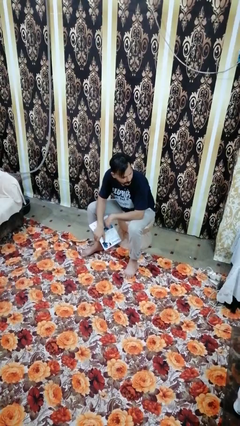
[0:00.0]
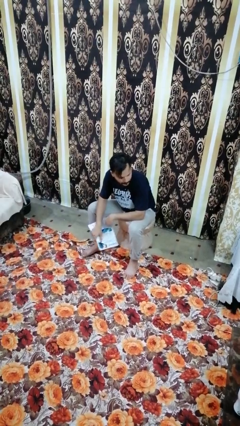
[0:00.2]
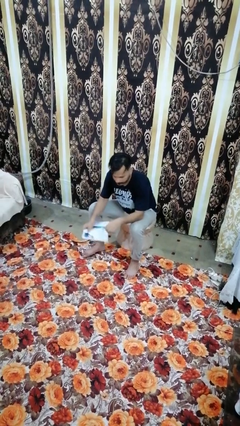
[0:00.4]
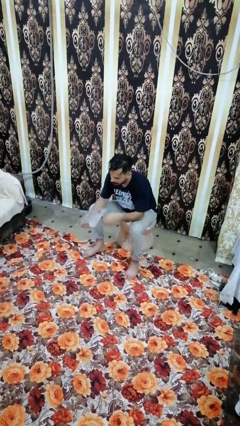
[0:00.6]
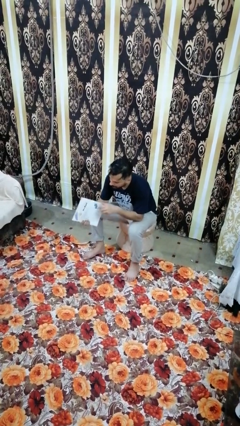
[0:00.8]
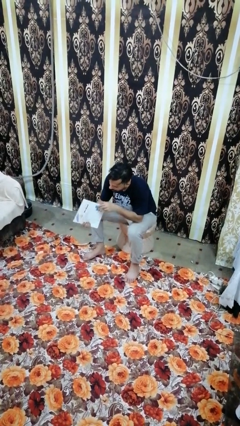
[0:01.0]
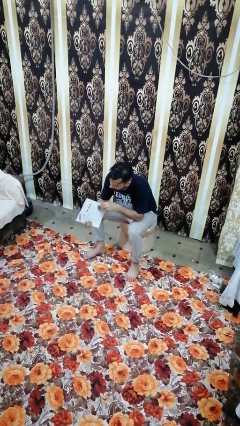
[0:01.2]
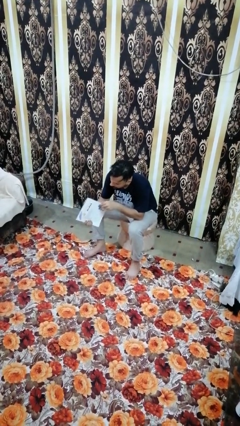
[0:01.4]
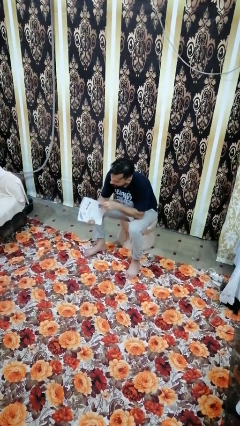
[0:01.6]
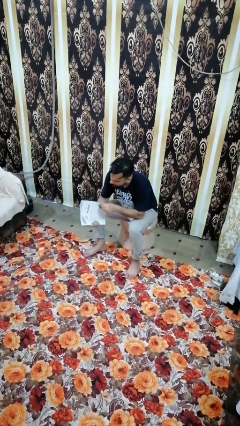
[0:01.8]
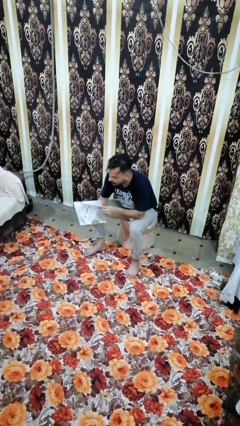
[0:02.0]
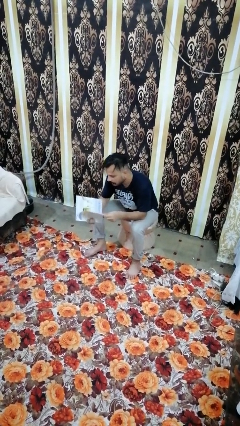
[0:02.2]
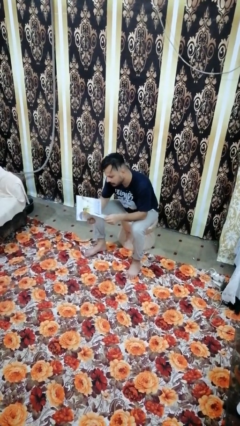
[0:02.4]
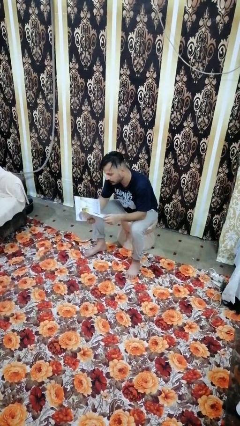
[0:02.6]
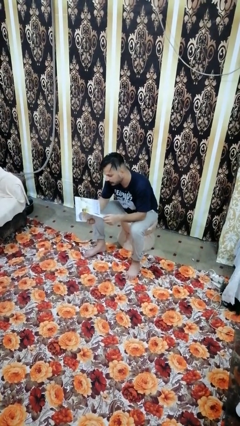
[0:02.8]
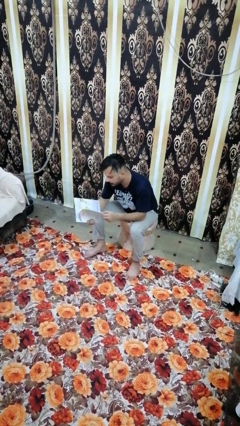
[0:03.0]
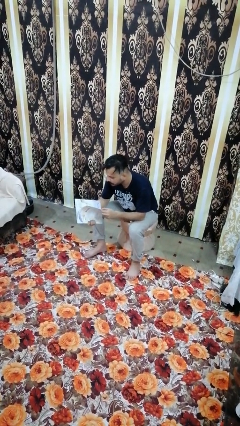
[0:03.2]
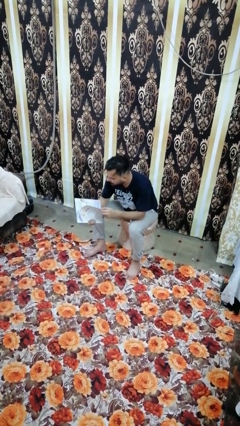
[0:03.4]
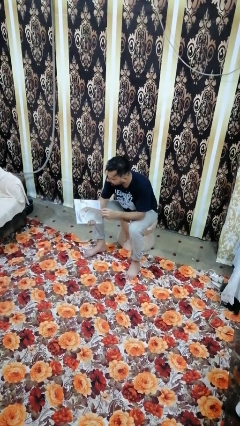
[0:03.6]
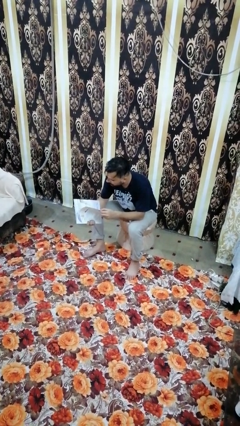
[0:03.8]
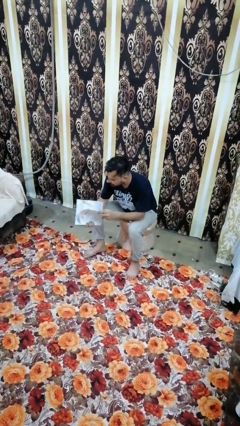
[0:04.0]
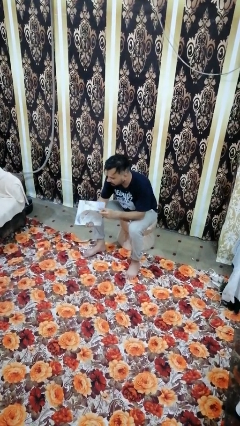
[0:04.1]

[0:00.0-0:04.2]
person reads magazine

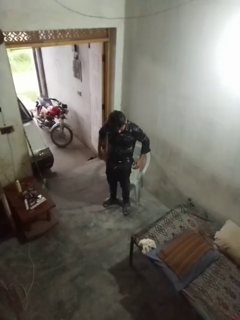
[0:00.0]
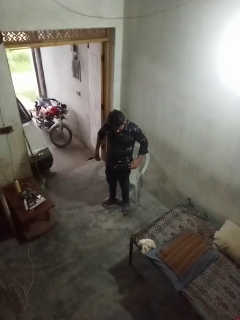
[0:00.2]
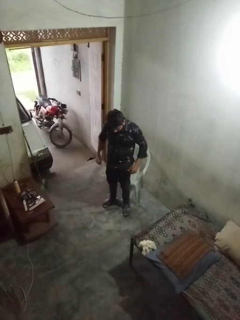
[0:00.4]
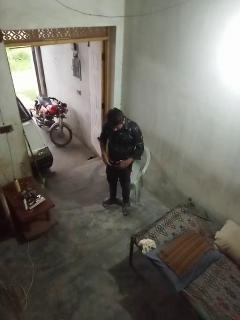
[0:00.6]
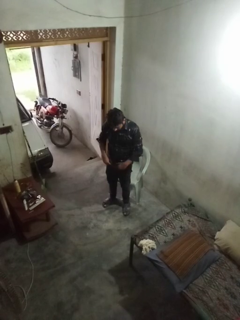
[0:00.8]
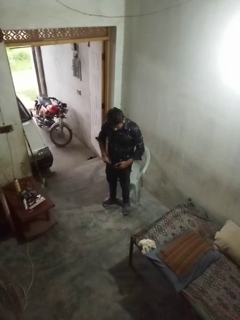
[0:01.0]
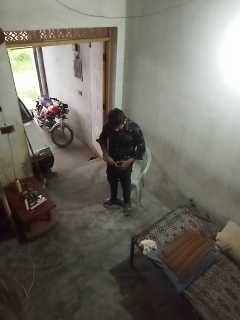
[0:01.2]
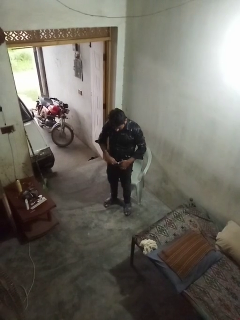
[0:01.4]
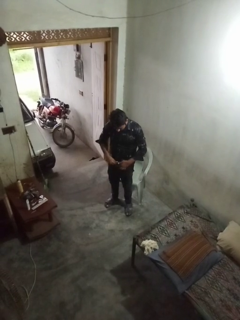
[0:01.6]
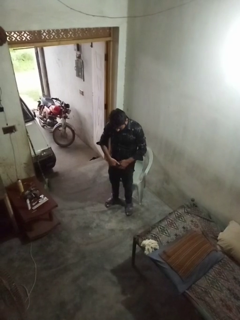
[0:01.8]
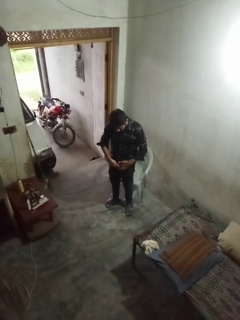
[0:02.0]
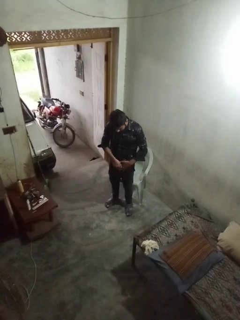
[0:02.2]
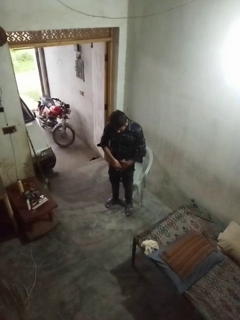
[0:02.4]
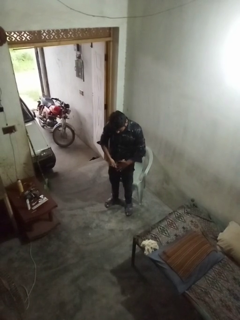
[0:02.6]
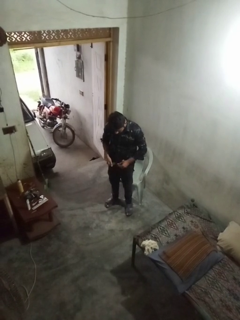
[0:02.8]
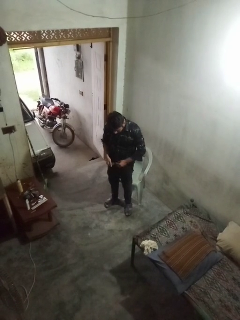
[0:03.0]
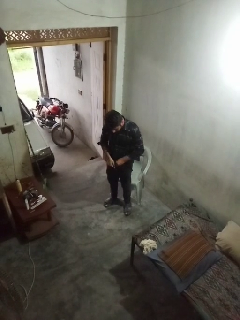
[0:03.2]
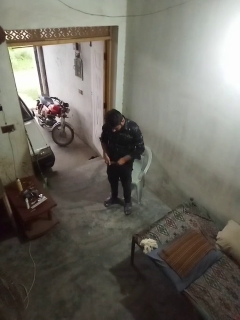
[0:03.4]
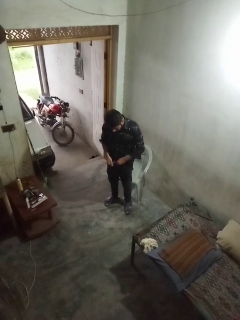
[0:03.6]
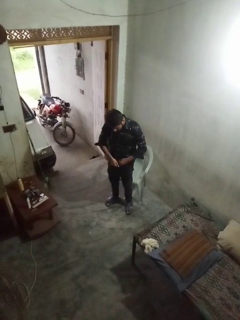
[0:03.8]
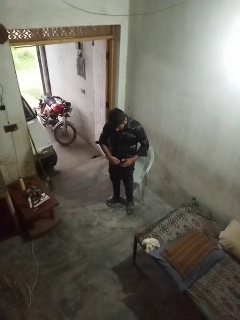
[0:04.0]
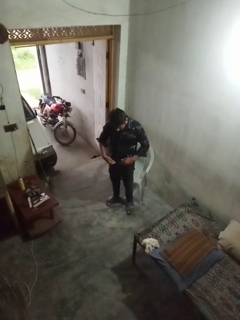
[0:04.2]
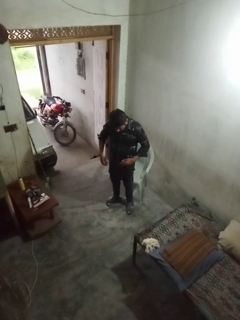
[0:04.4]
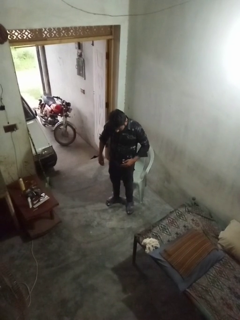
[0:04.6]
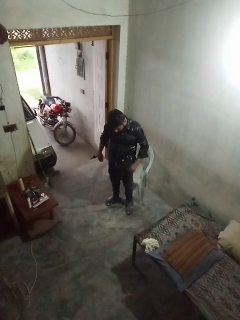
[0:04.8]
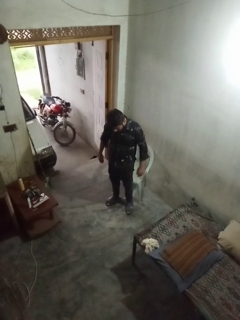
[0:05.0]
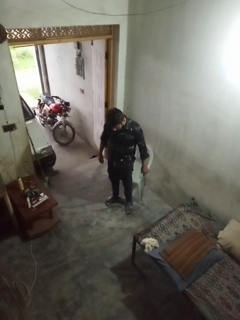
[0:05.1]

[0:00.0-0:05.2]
person puts on belt

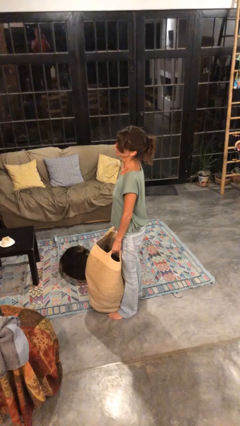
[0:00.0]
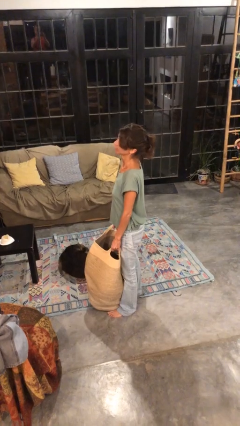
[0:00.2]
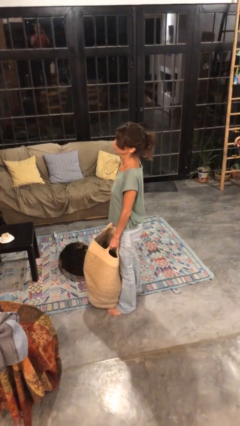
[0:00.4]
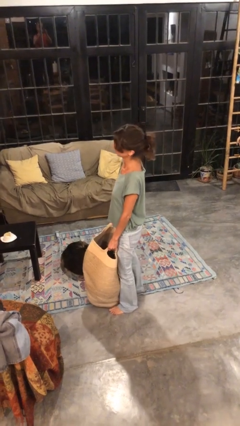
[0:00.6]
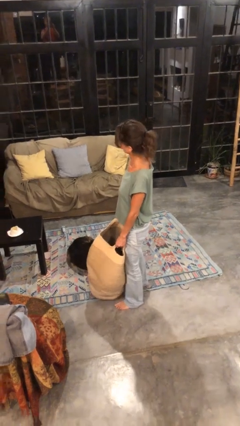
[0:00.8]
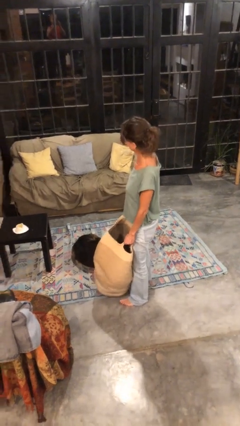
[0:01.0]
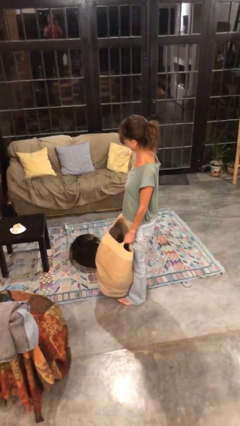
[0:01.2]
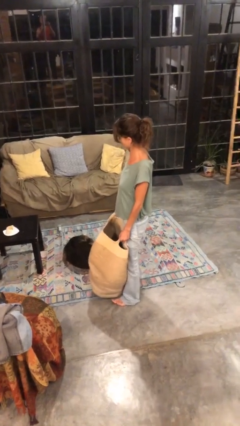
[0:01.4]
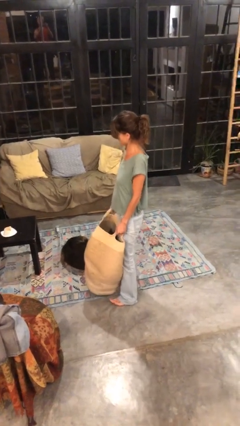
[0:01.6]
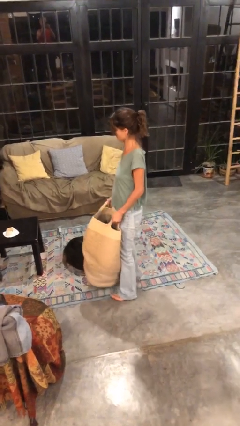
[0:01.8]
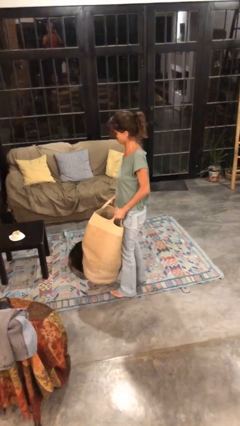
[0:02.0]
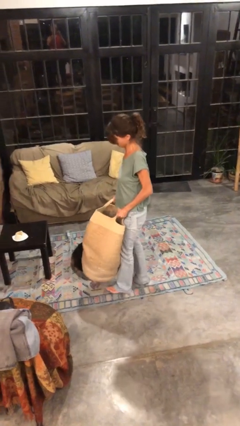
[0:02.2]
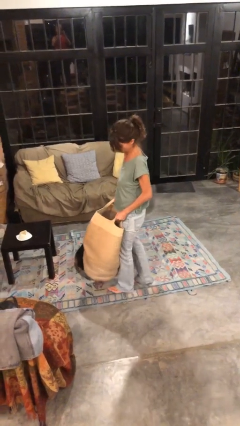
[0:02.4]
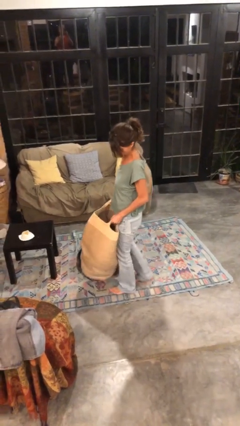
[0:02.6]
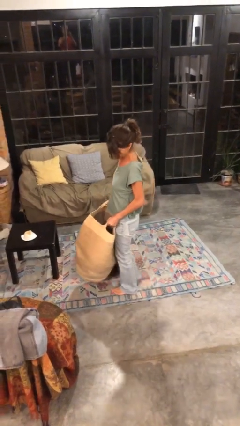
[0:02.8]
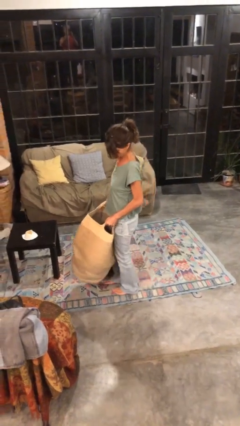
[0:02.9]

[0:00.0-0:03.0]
person carries laundry basket

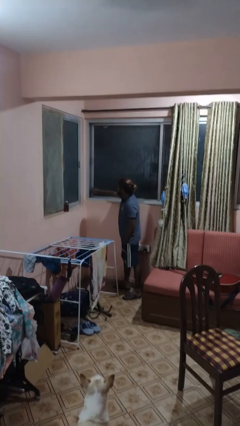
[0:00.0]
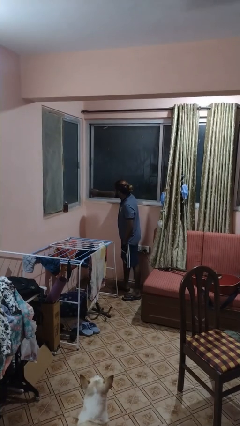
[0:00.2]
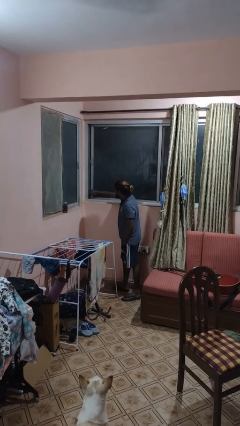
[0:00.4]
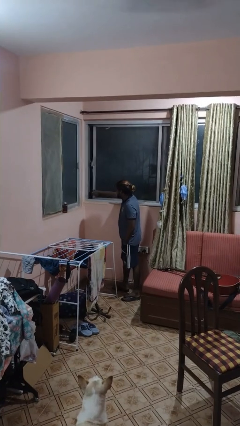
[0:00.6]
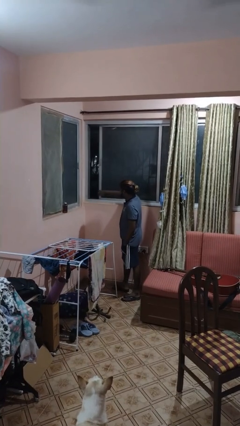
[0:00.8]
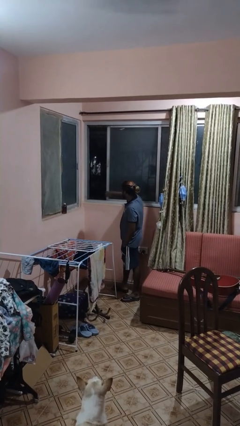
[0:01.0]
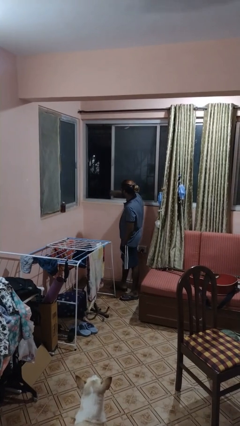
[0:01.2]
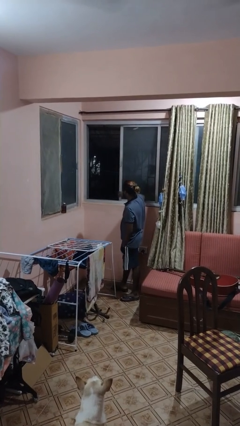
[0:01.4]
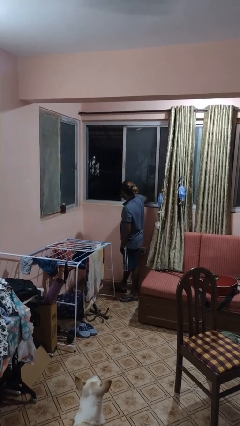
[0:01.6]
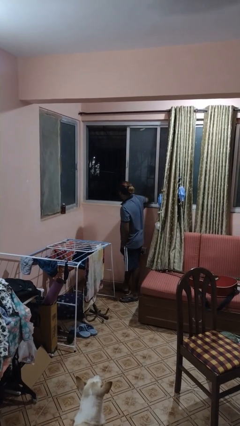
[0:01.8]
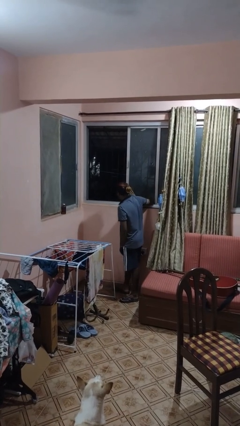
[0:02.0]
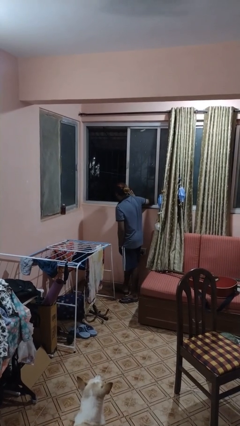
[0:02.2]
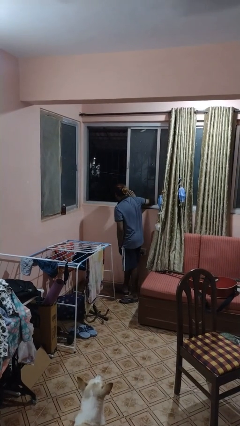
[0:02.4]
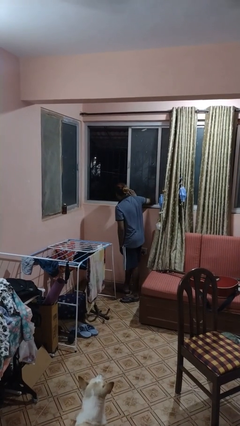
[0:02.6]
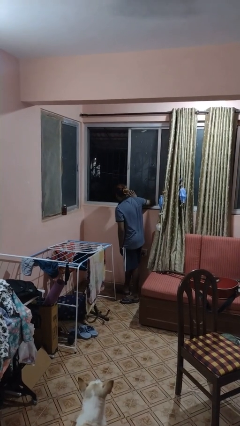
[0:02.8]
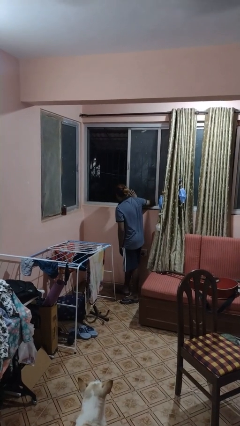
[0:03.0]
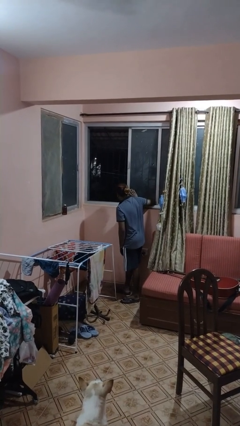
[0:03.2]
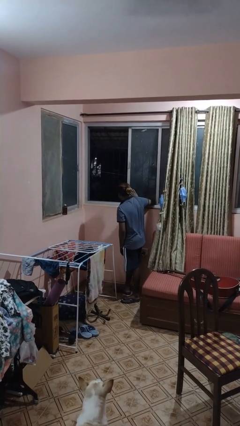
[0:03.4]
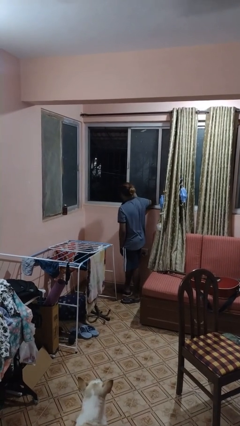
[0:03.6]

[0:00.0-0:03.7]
person opens sliding door

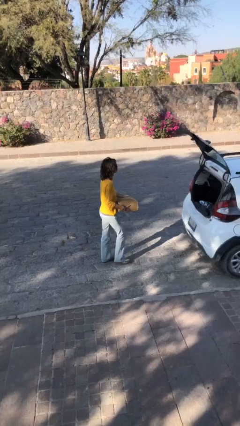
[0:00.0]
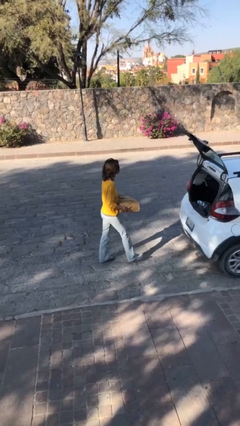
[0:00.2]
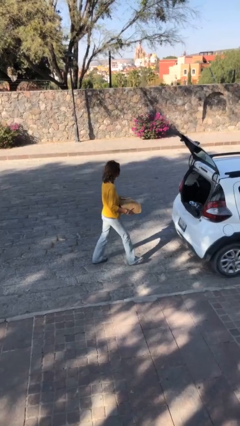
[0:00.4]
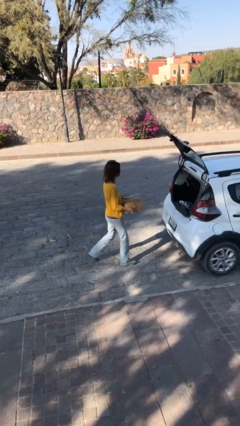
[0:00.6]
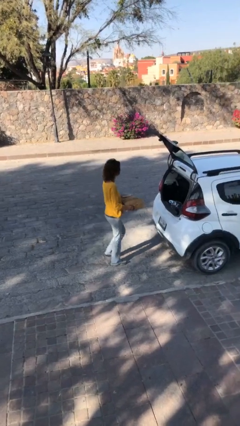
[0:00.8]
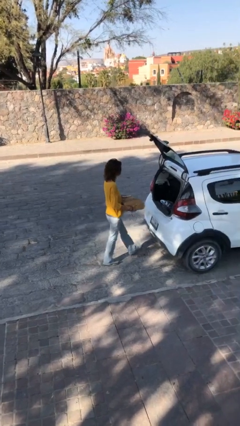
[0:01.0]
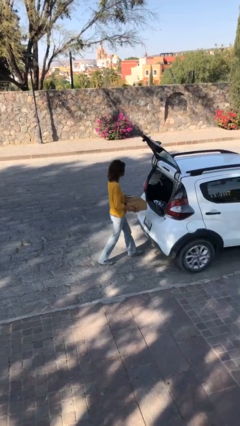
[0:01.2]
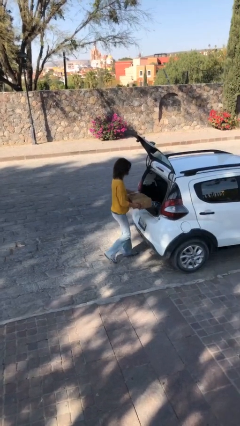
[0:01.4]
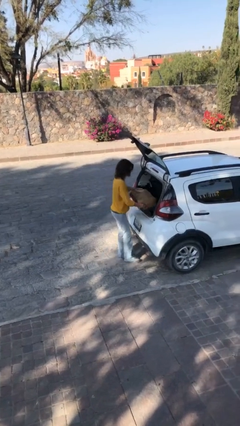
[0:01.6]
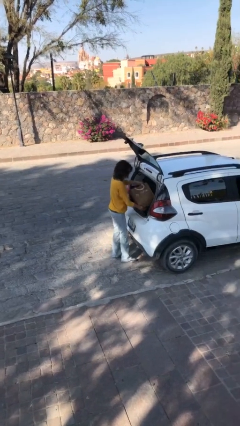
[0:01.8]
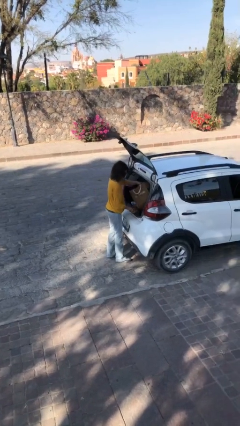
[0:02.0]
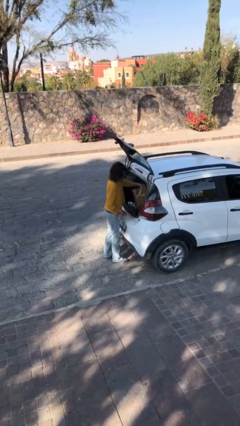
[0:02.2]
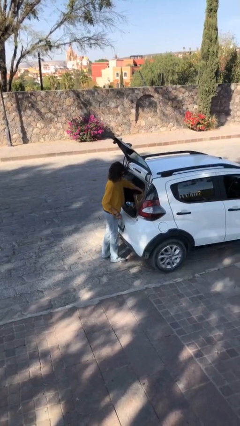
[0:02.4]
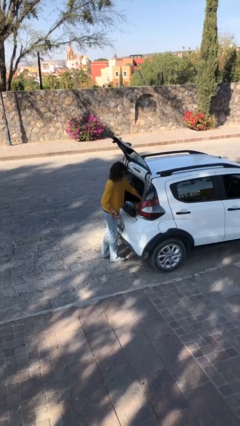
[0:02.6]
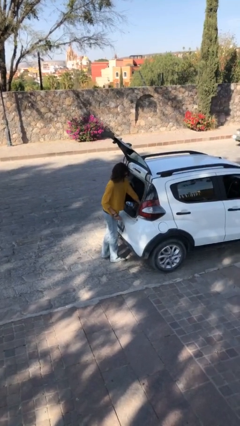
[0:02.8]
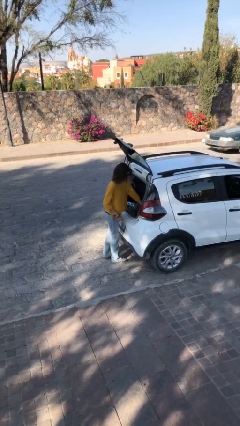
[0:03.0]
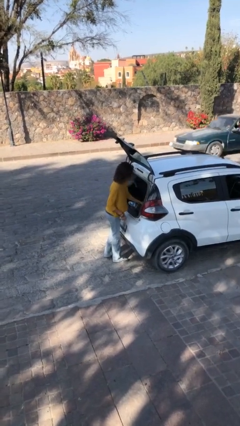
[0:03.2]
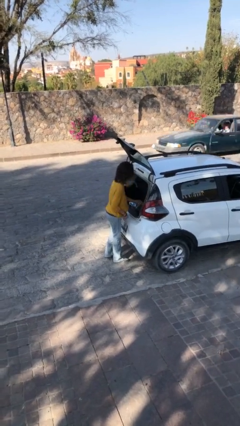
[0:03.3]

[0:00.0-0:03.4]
person loads car
